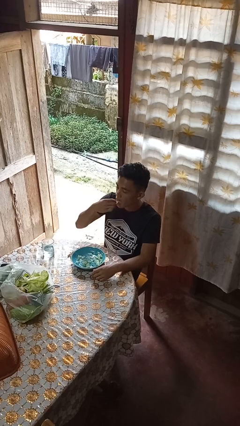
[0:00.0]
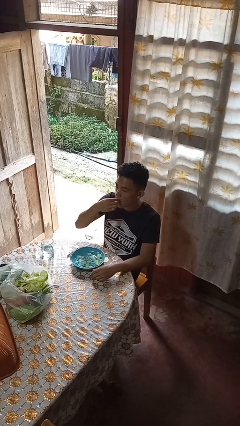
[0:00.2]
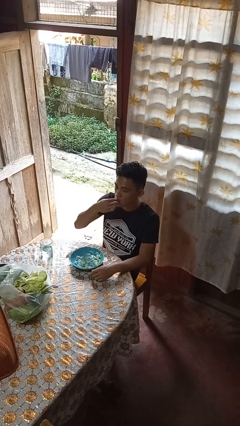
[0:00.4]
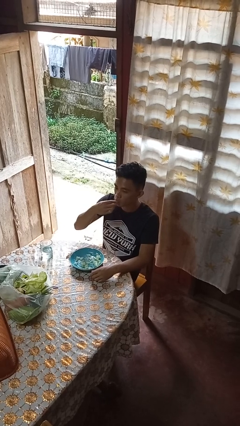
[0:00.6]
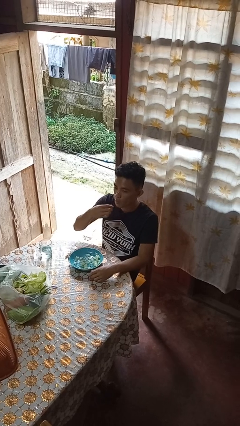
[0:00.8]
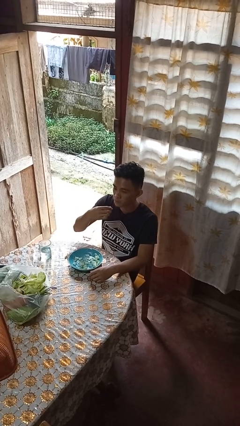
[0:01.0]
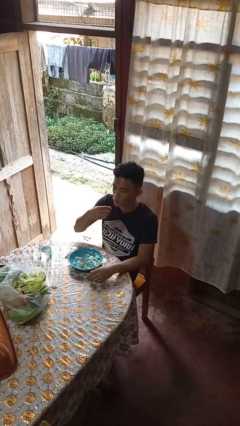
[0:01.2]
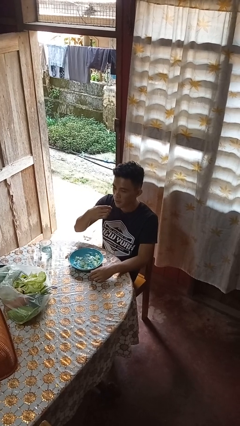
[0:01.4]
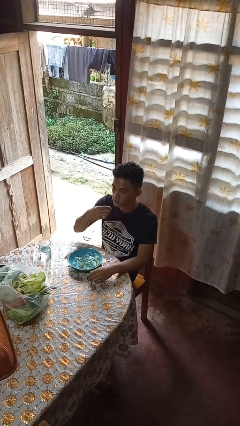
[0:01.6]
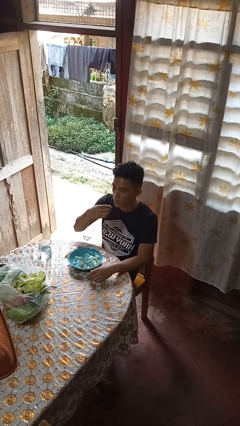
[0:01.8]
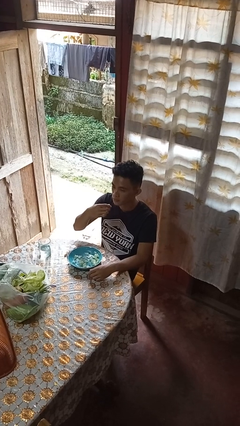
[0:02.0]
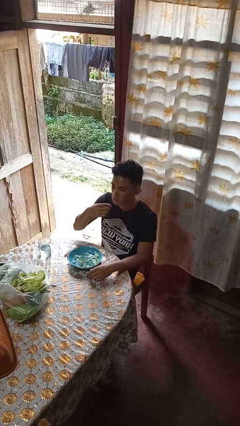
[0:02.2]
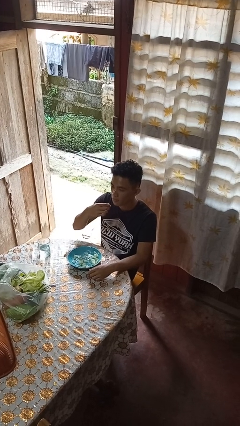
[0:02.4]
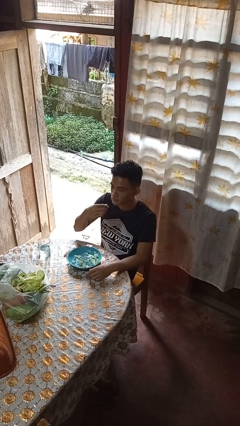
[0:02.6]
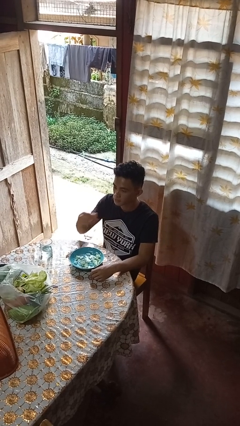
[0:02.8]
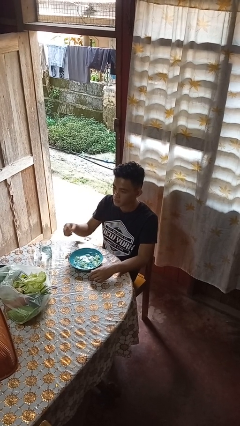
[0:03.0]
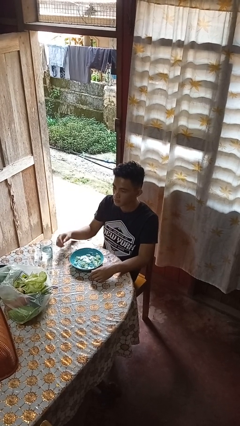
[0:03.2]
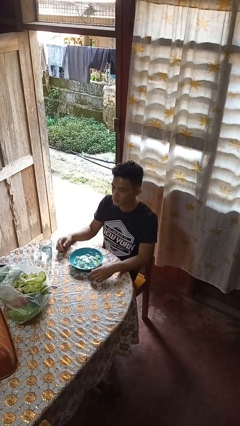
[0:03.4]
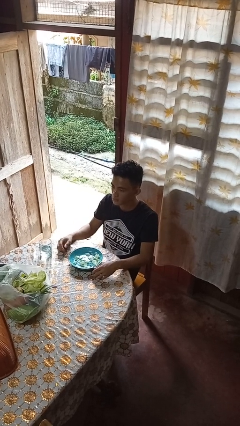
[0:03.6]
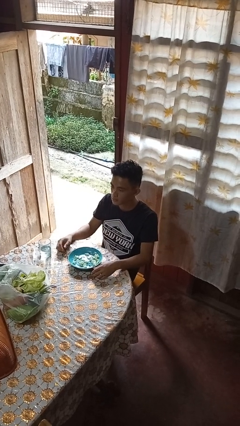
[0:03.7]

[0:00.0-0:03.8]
person eats with hands

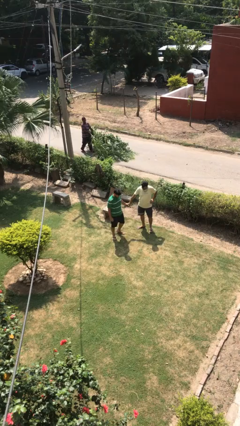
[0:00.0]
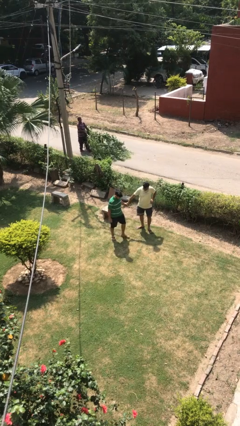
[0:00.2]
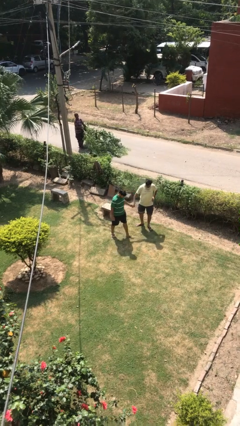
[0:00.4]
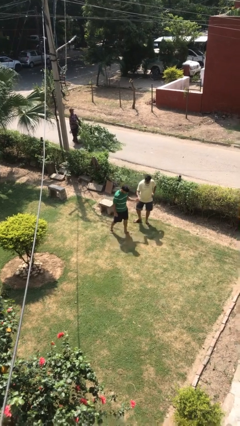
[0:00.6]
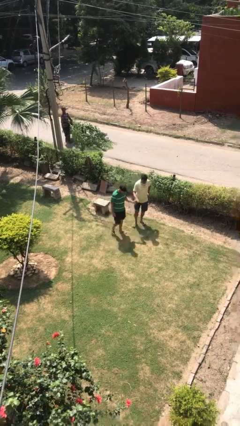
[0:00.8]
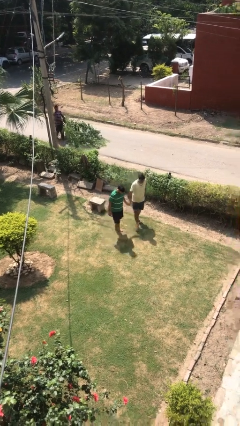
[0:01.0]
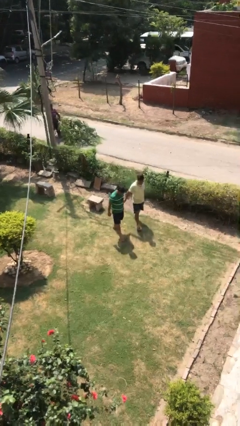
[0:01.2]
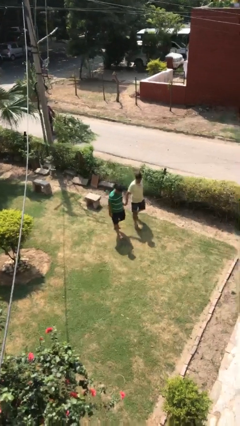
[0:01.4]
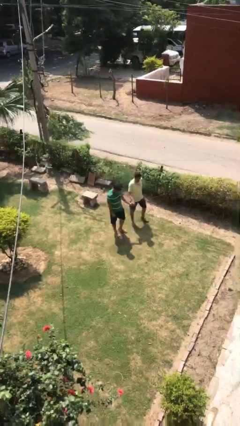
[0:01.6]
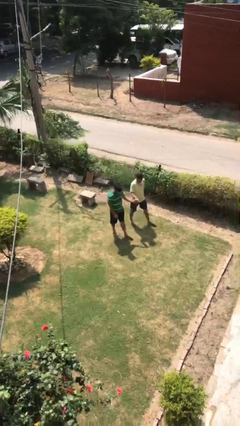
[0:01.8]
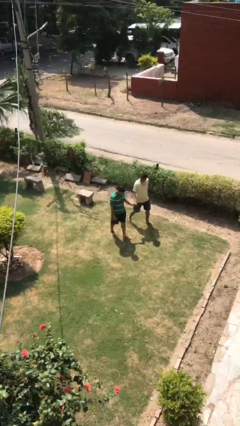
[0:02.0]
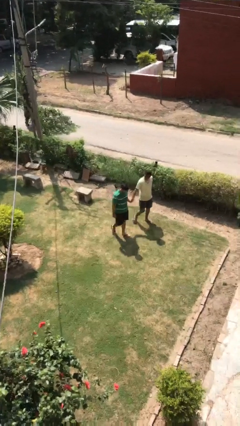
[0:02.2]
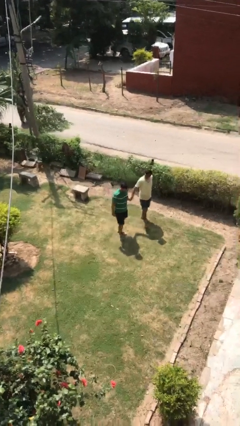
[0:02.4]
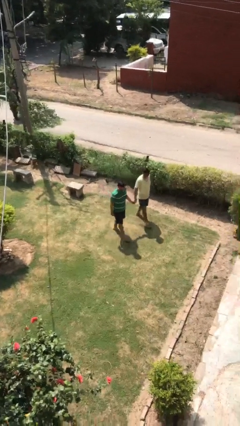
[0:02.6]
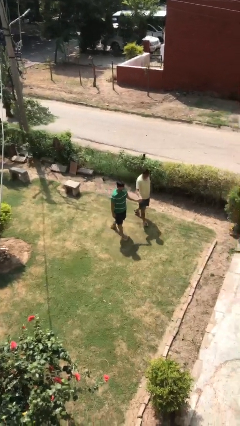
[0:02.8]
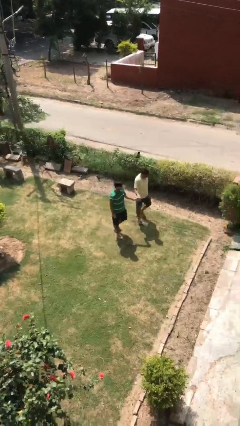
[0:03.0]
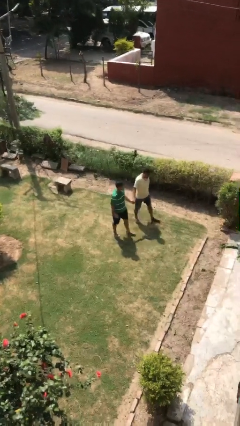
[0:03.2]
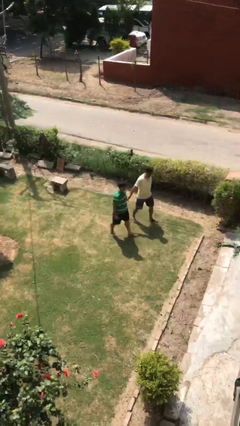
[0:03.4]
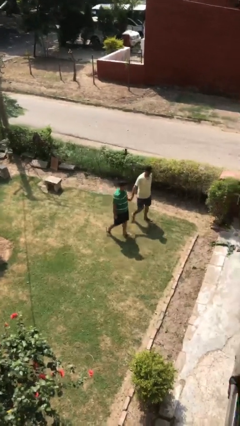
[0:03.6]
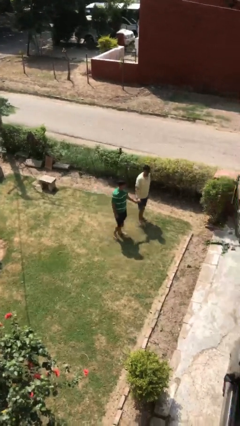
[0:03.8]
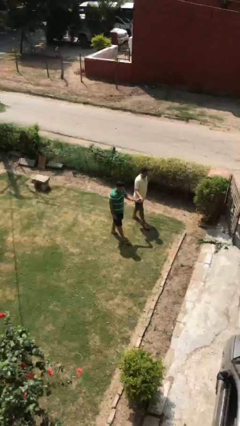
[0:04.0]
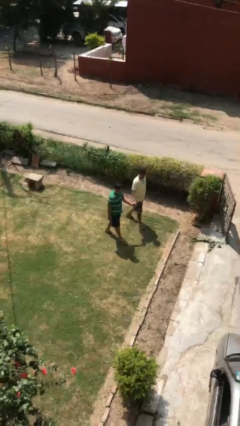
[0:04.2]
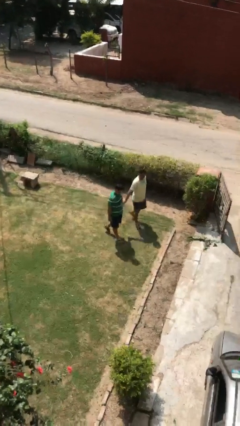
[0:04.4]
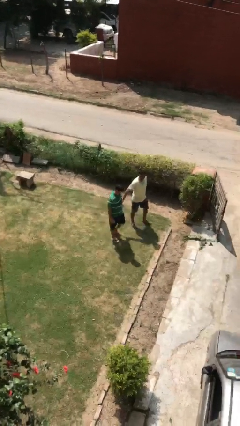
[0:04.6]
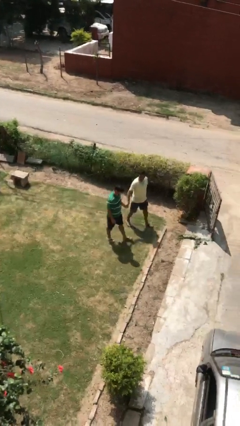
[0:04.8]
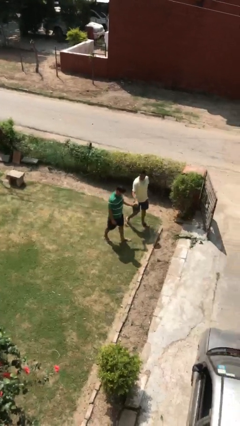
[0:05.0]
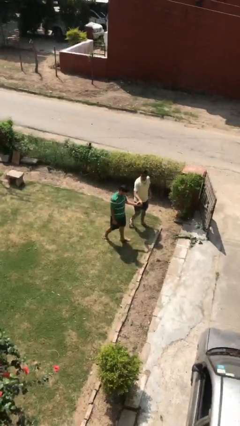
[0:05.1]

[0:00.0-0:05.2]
person holds hand

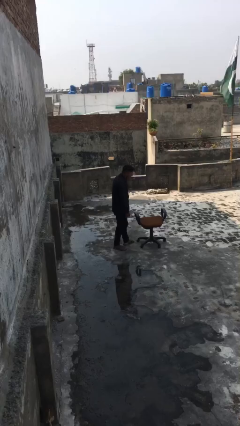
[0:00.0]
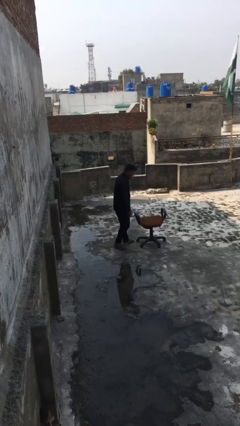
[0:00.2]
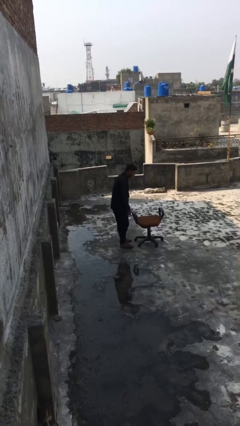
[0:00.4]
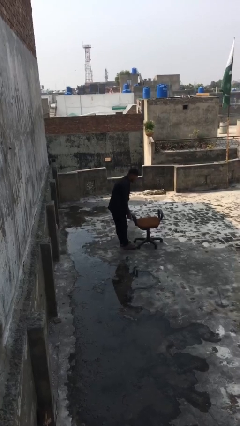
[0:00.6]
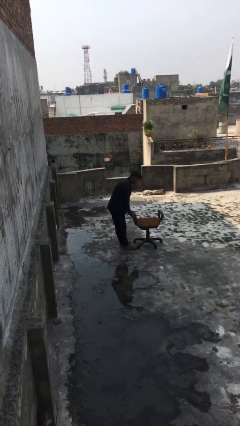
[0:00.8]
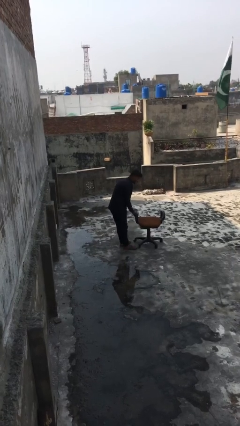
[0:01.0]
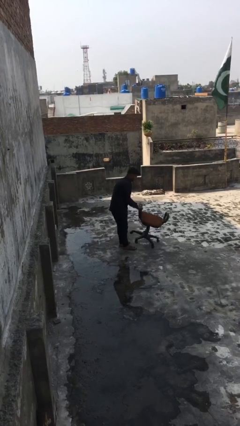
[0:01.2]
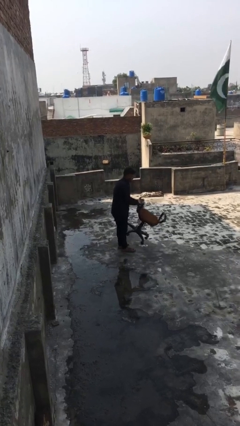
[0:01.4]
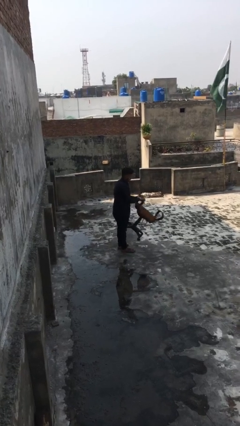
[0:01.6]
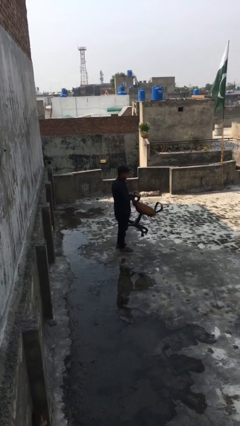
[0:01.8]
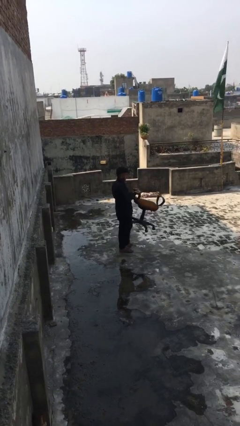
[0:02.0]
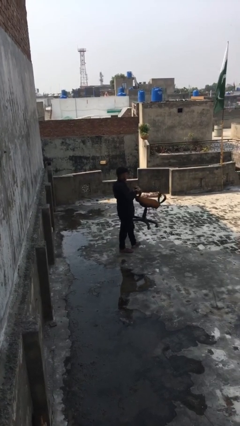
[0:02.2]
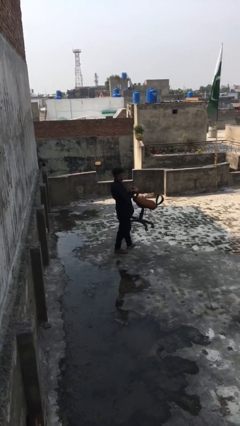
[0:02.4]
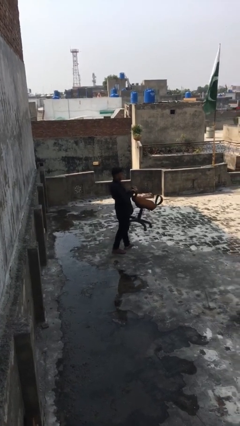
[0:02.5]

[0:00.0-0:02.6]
person picks up object from floor

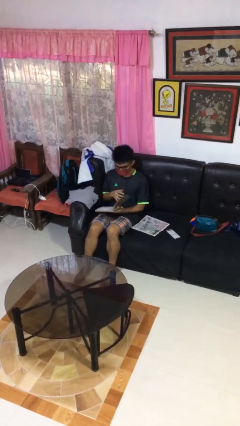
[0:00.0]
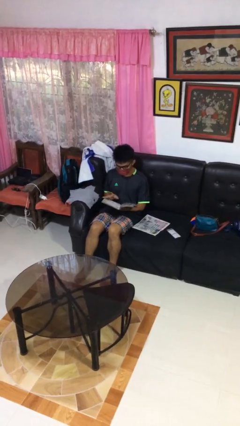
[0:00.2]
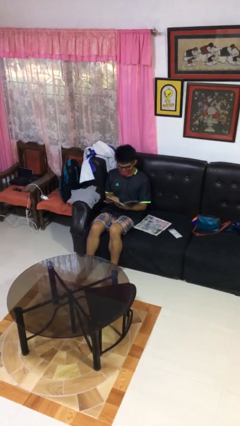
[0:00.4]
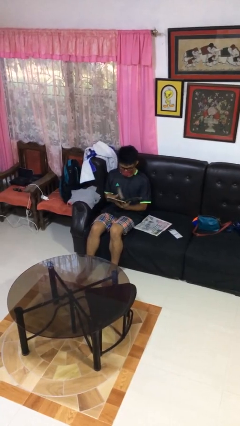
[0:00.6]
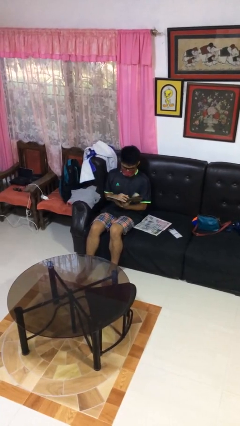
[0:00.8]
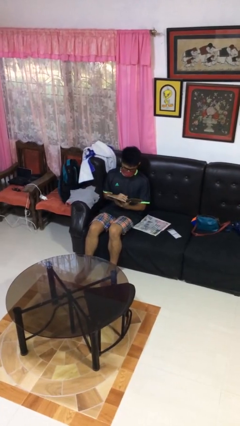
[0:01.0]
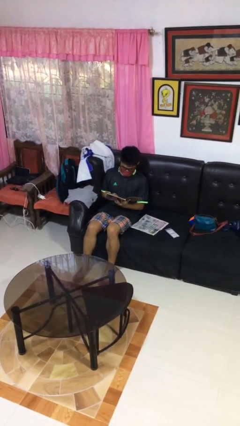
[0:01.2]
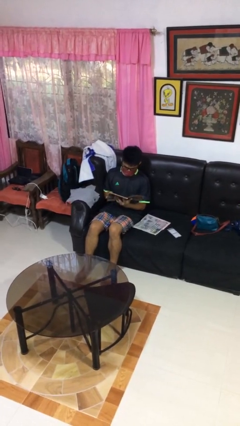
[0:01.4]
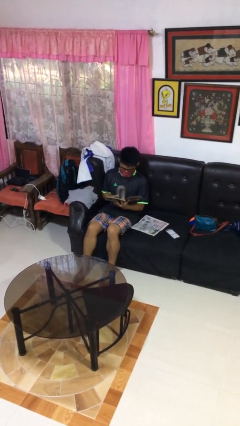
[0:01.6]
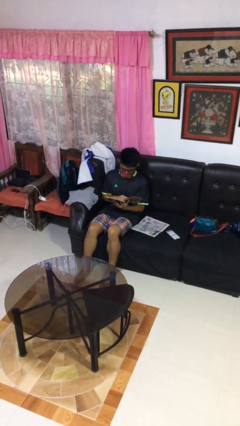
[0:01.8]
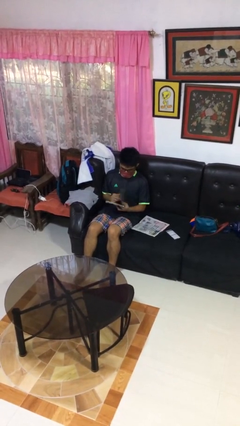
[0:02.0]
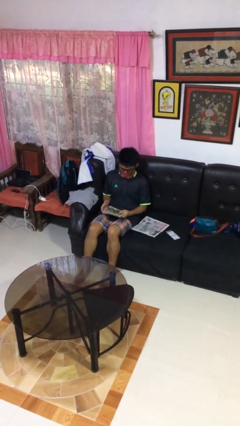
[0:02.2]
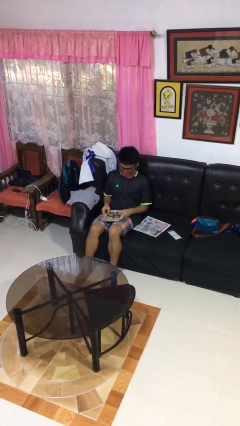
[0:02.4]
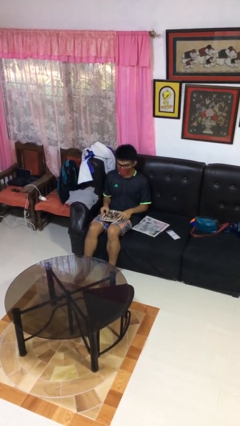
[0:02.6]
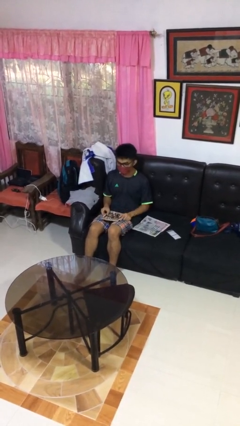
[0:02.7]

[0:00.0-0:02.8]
person reads magazine

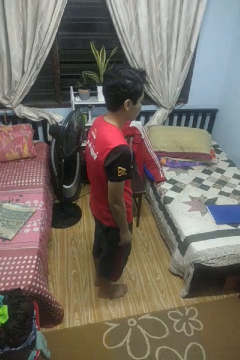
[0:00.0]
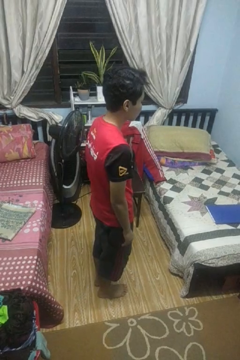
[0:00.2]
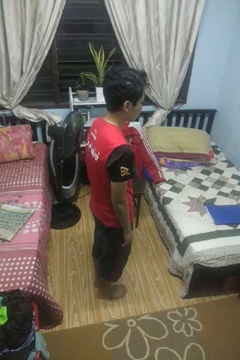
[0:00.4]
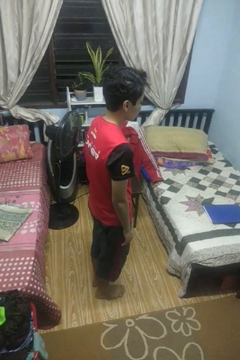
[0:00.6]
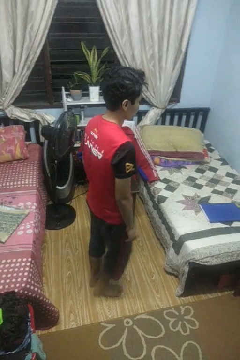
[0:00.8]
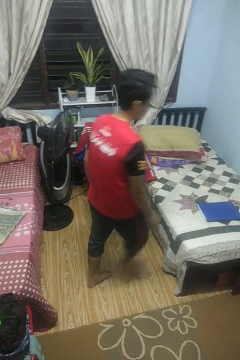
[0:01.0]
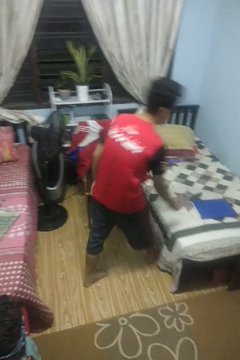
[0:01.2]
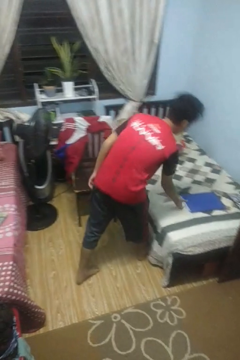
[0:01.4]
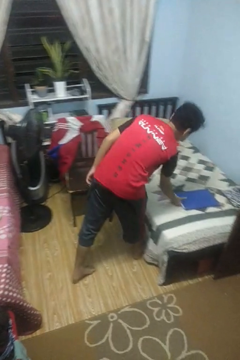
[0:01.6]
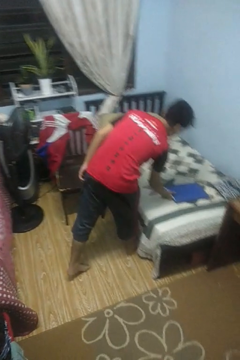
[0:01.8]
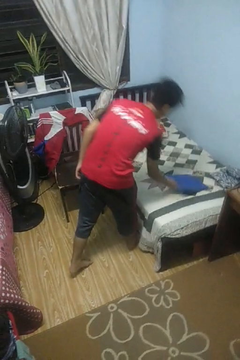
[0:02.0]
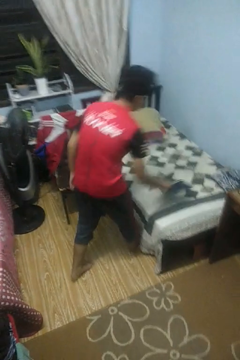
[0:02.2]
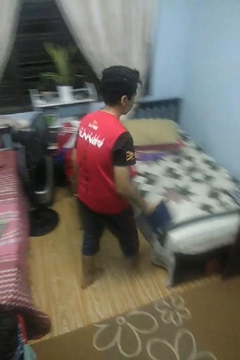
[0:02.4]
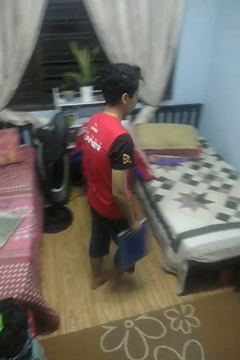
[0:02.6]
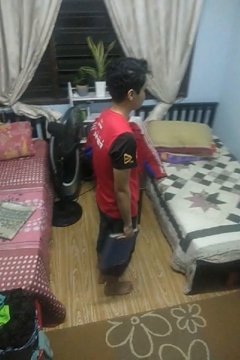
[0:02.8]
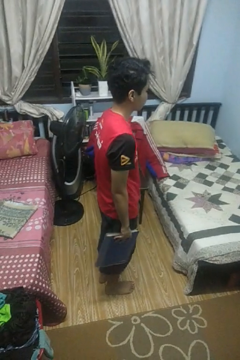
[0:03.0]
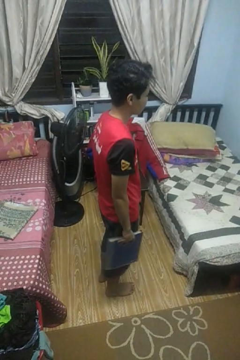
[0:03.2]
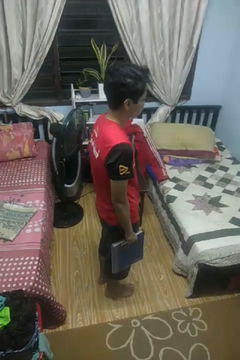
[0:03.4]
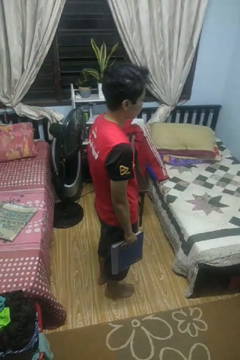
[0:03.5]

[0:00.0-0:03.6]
person picks up object from bed
